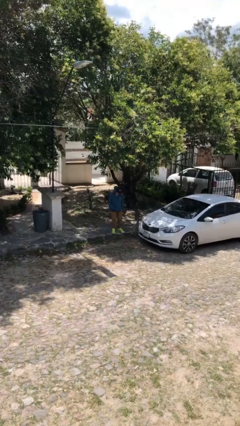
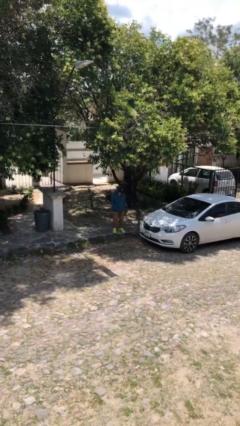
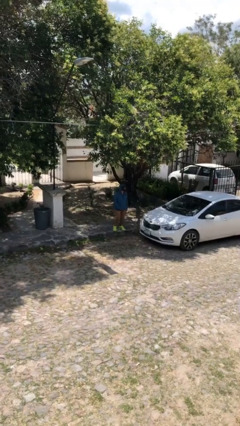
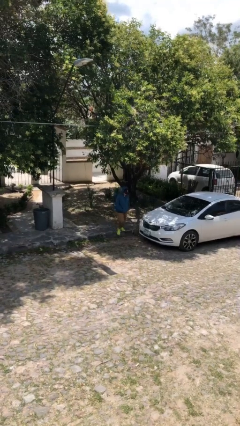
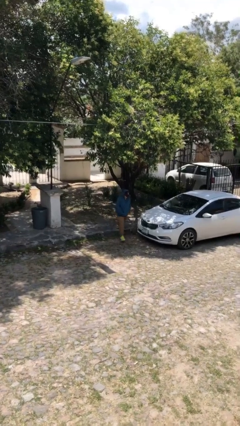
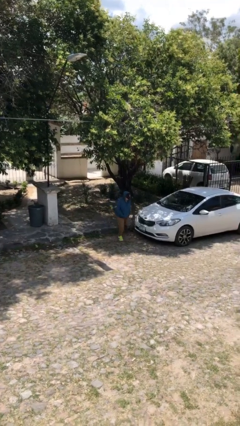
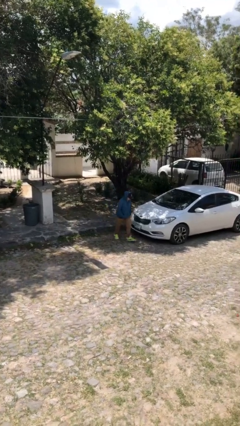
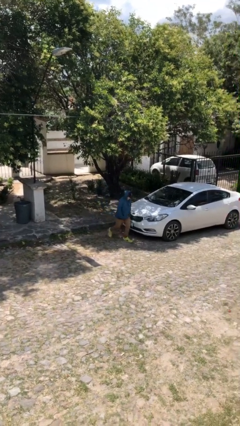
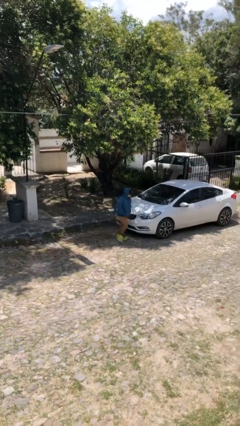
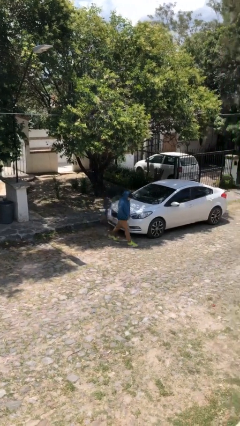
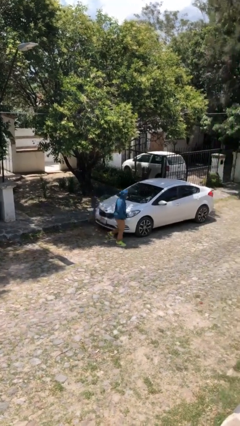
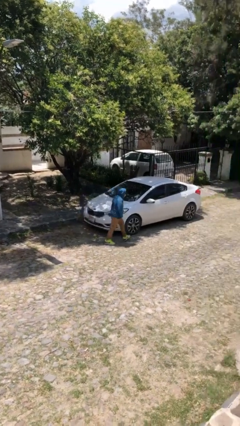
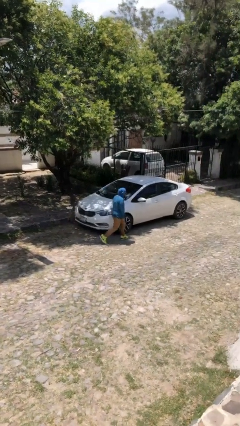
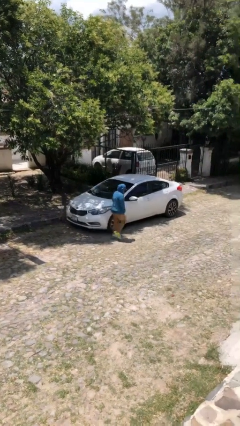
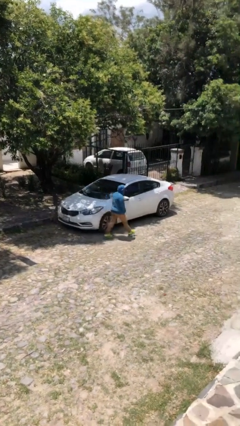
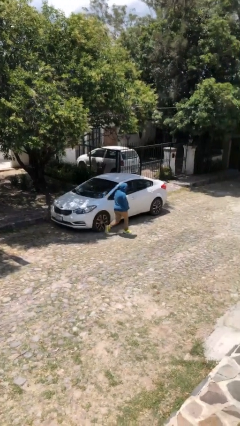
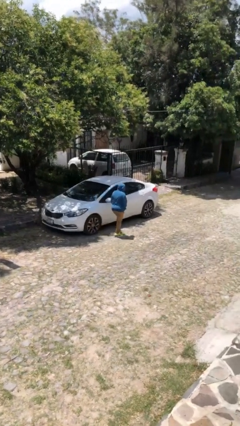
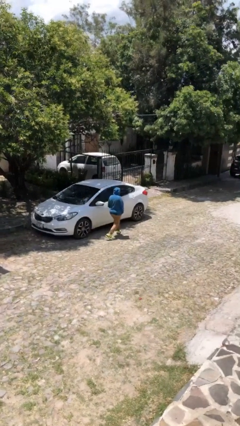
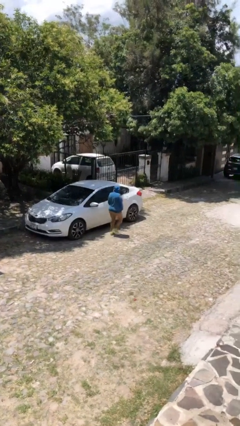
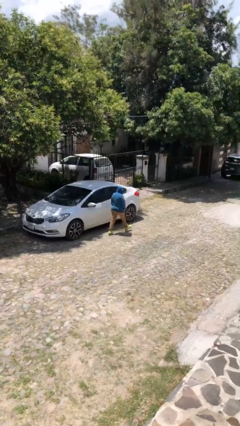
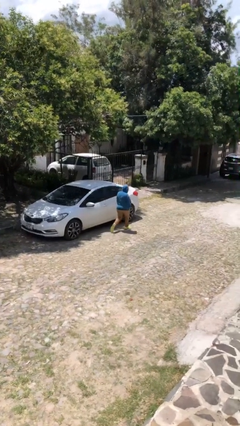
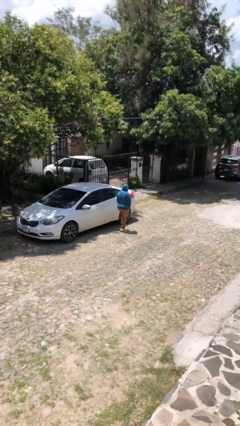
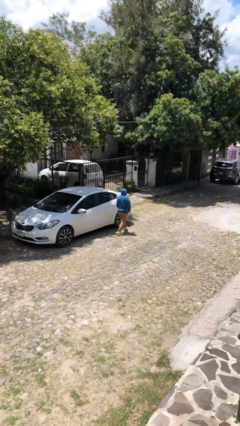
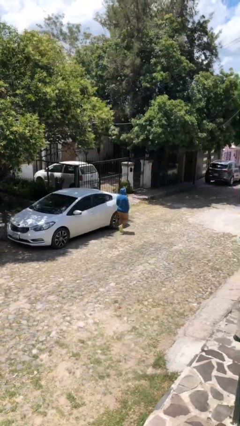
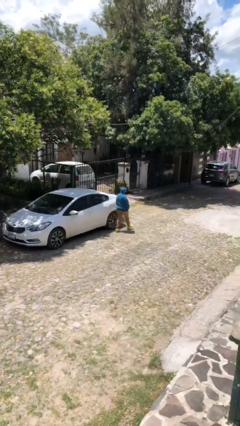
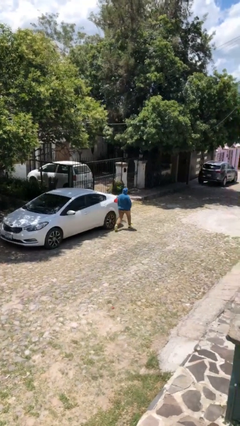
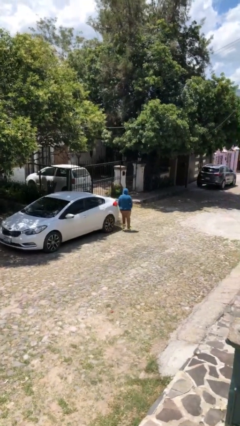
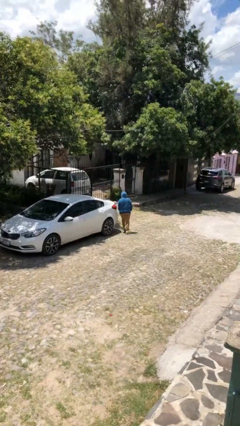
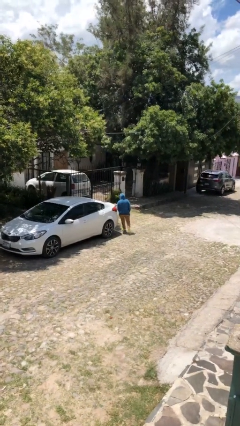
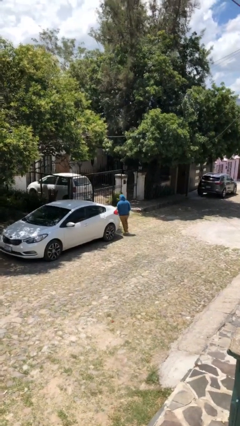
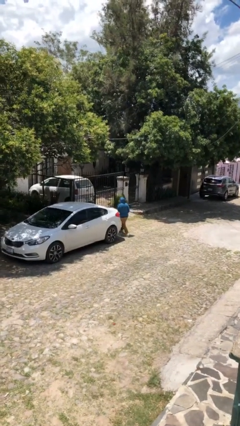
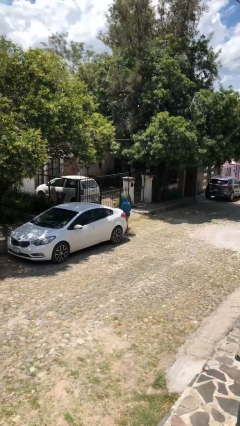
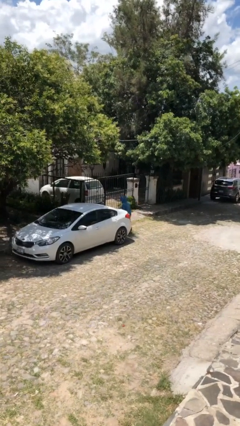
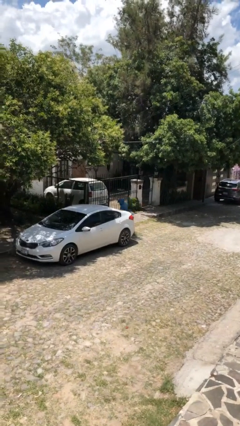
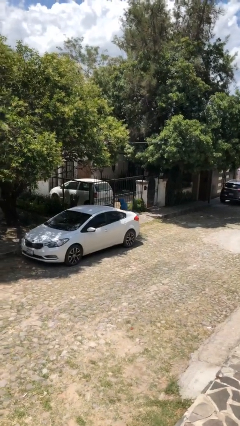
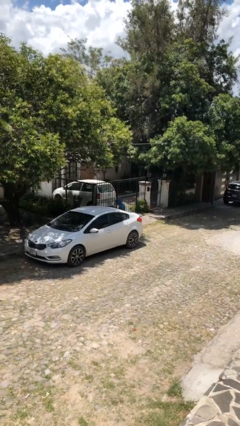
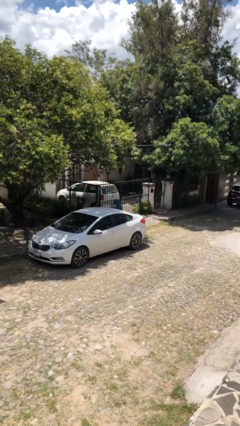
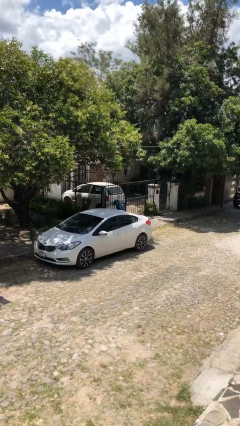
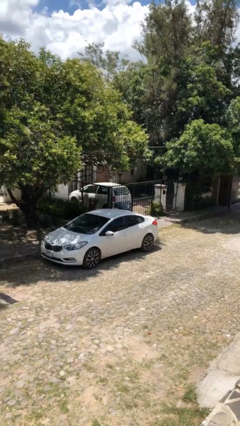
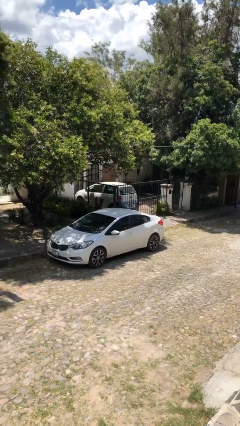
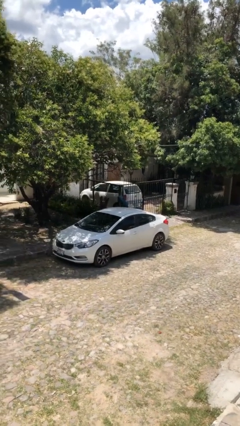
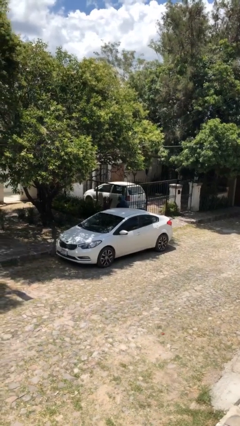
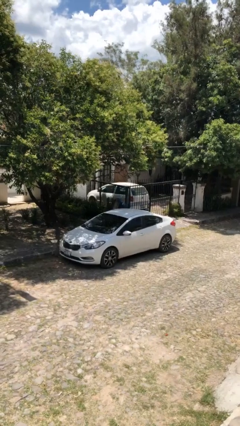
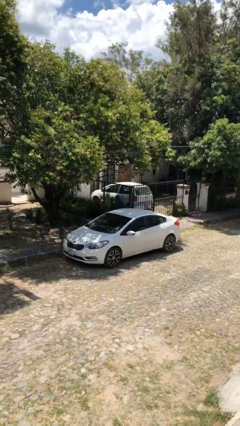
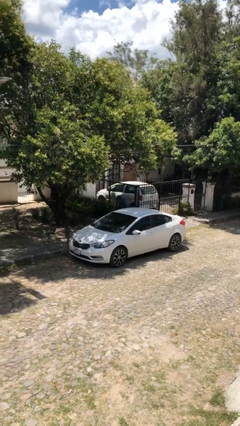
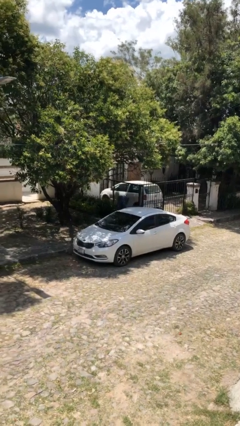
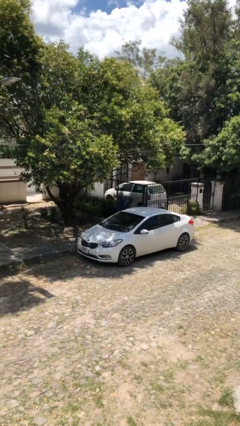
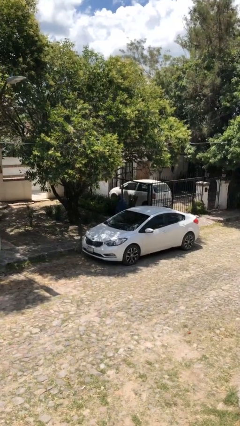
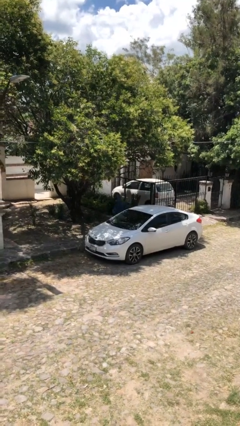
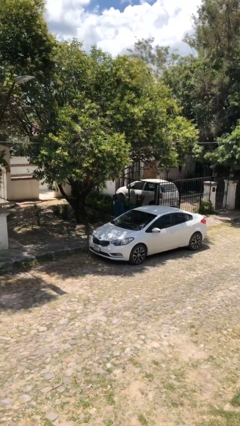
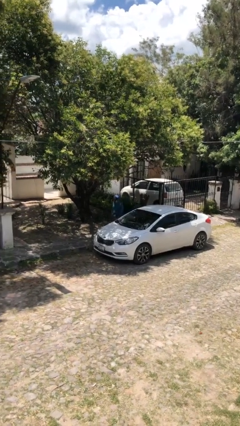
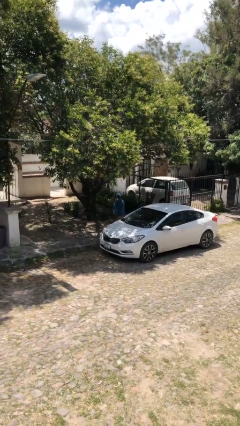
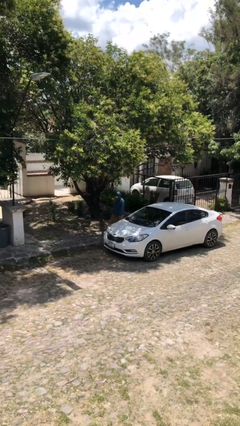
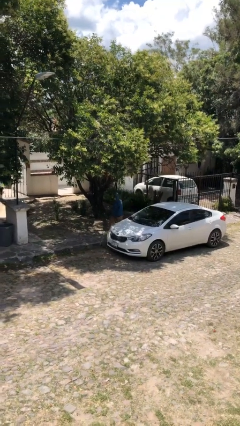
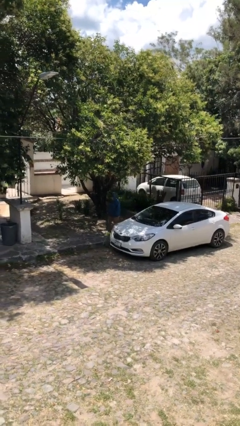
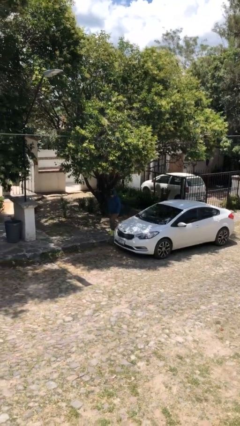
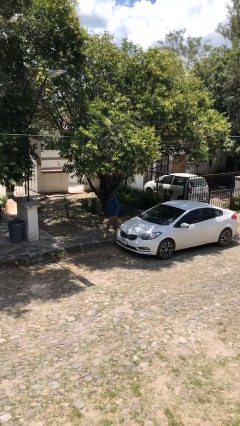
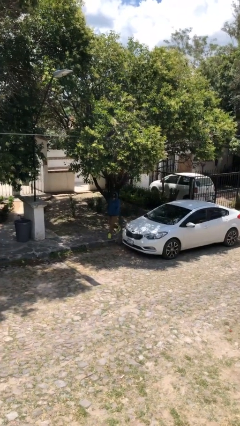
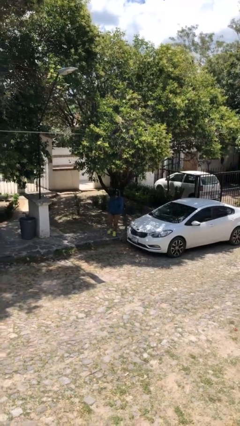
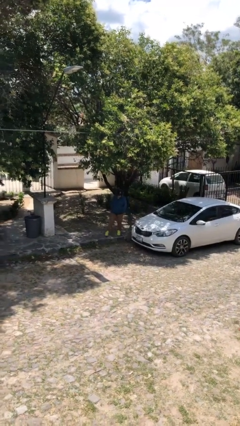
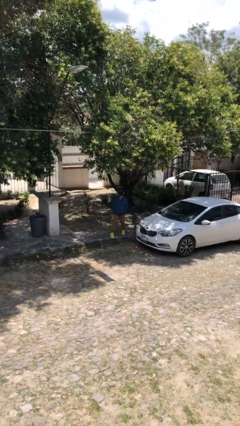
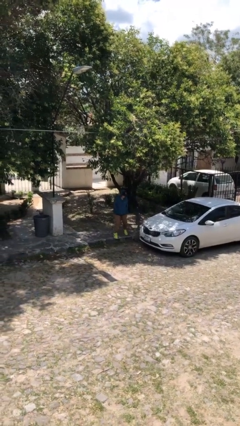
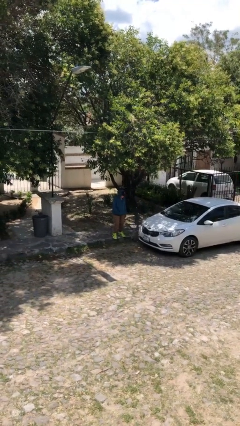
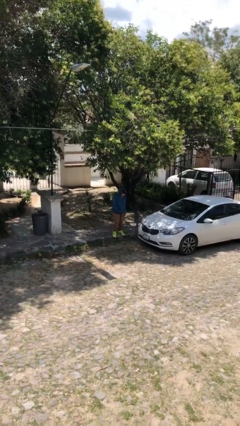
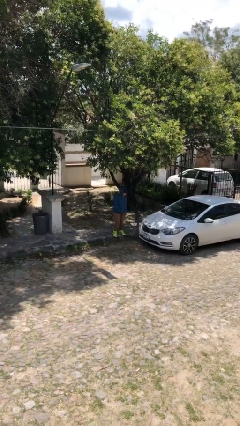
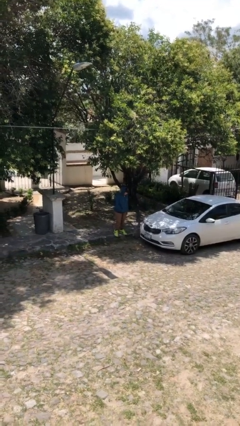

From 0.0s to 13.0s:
person walks around car

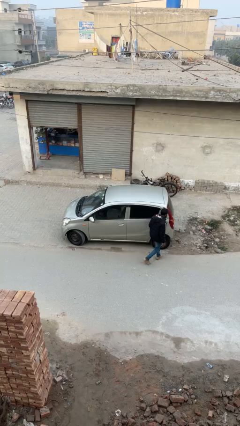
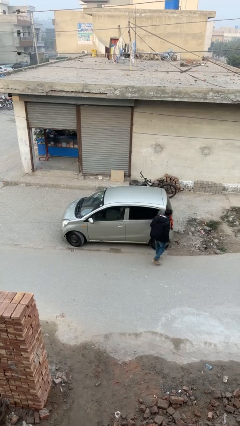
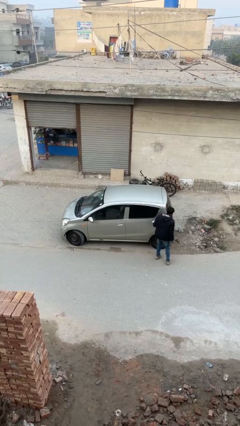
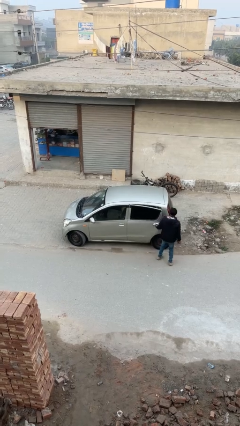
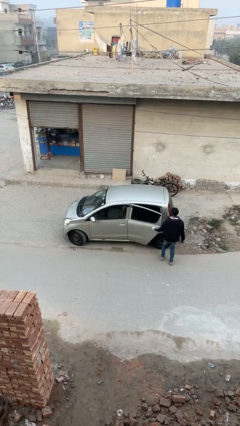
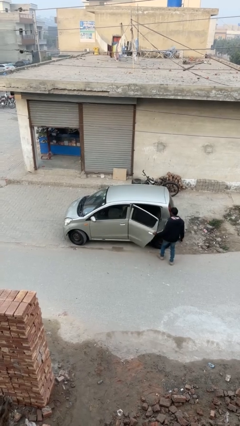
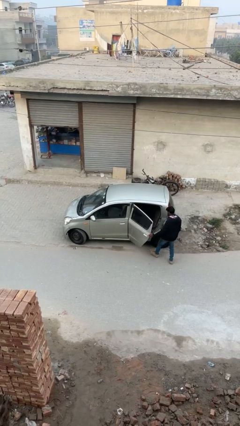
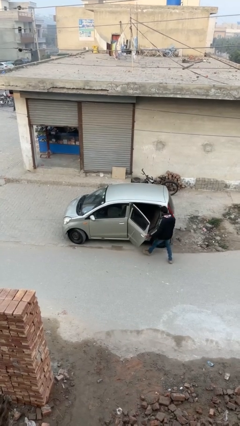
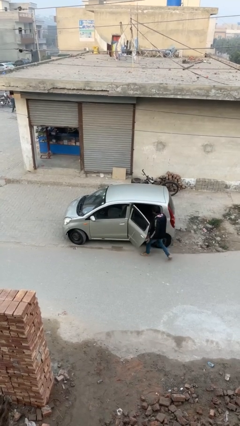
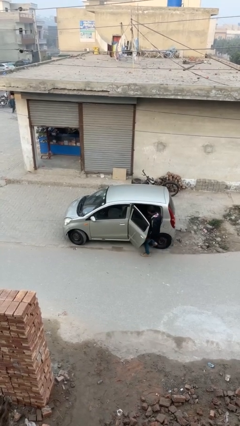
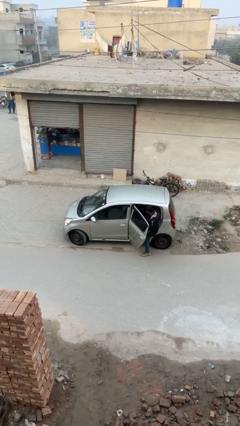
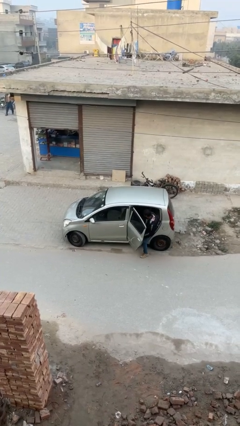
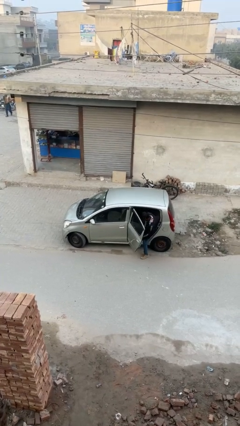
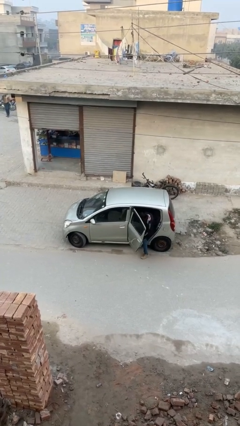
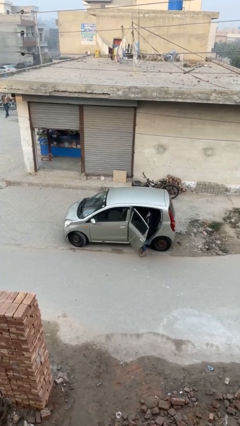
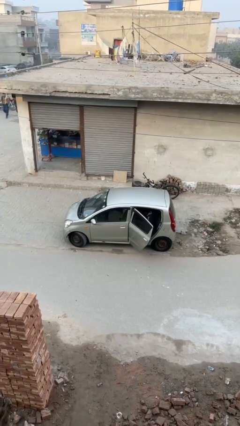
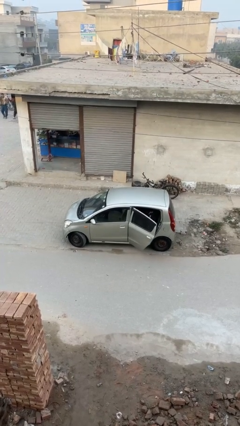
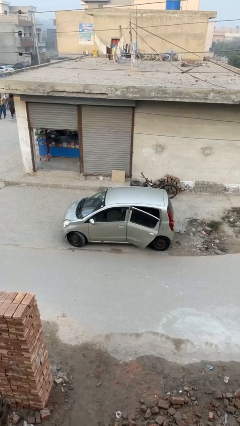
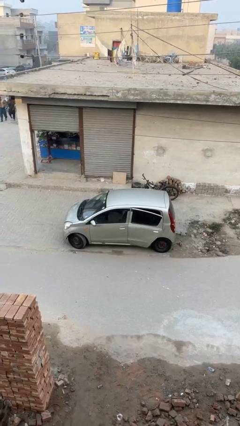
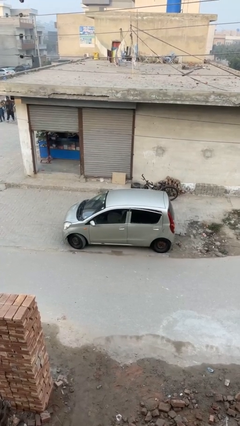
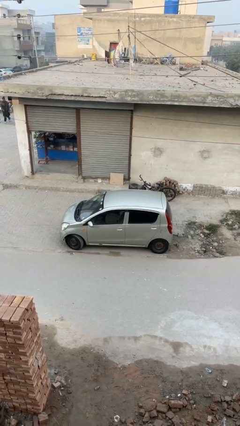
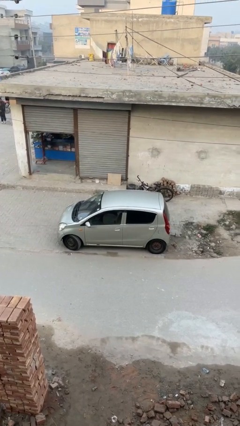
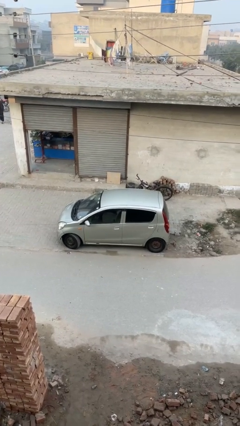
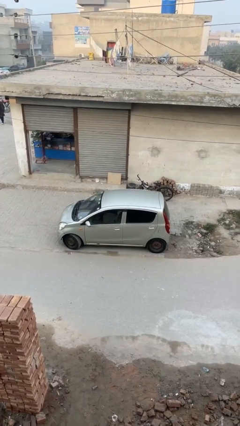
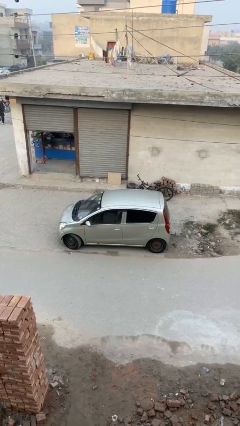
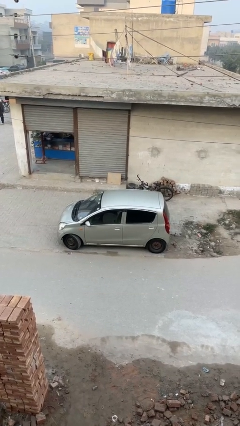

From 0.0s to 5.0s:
car picks up person
